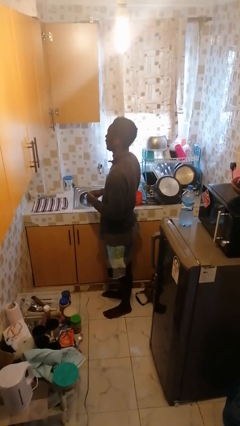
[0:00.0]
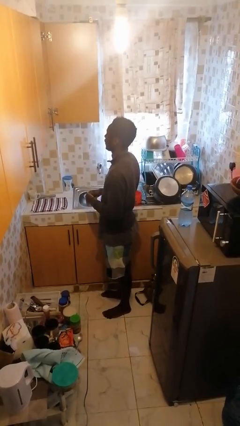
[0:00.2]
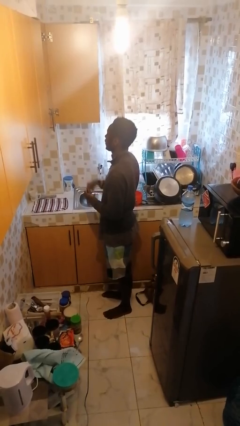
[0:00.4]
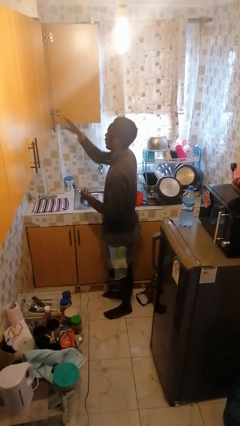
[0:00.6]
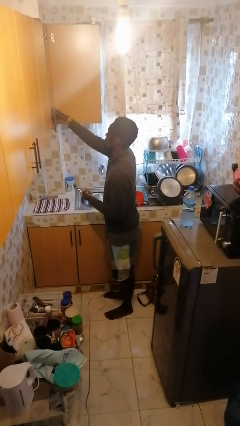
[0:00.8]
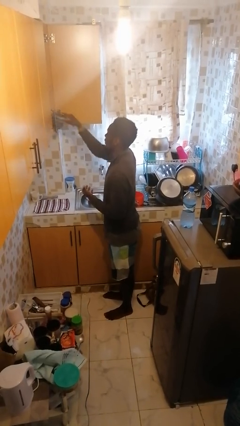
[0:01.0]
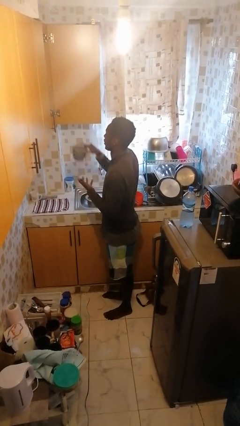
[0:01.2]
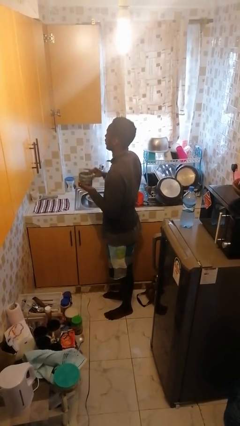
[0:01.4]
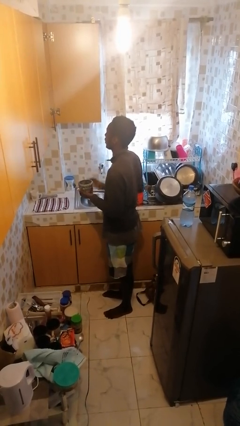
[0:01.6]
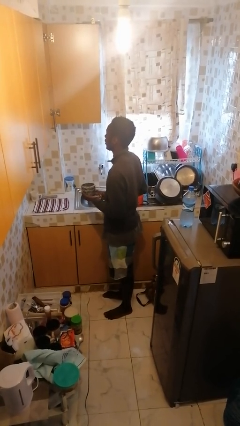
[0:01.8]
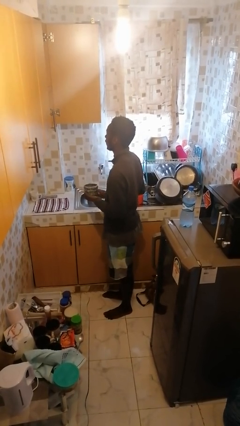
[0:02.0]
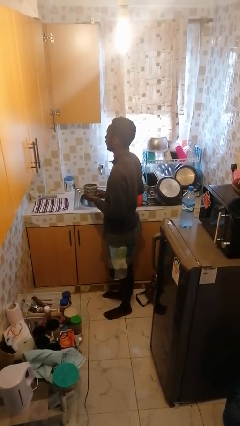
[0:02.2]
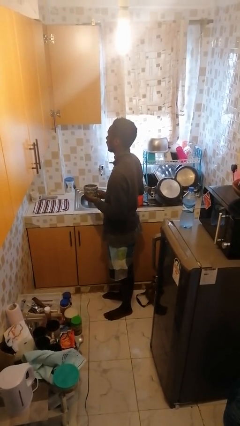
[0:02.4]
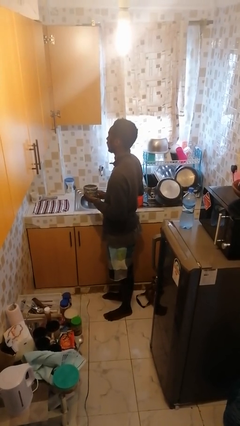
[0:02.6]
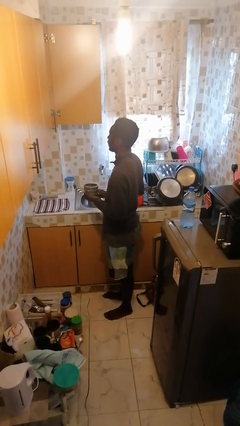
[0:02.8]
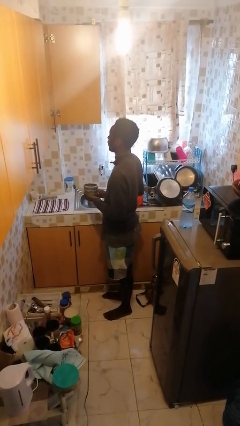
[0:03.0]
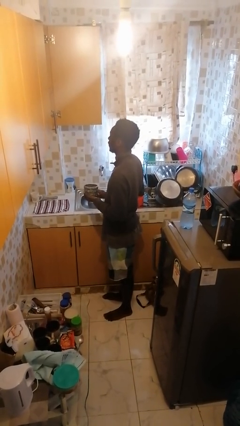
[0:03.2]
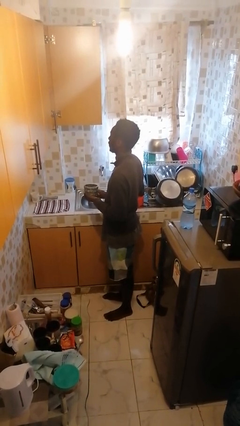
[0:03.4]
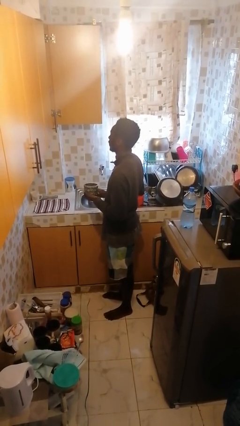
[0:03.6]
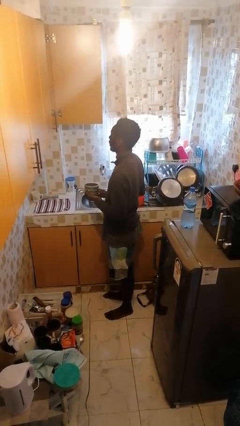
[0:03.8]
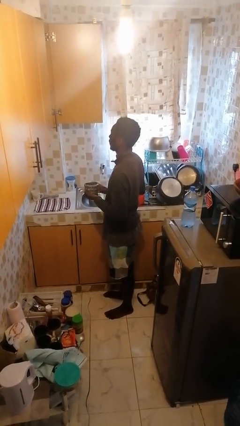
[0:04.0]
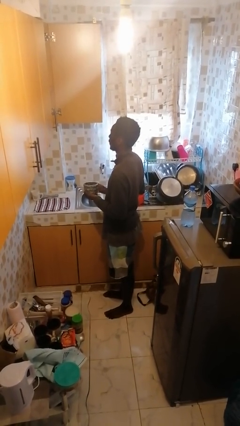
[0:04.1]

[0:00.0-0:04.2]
person picks up object from cabinet

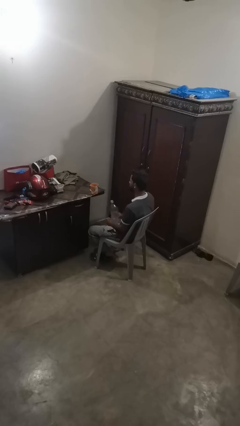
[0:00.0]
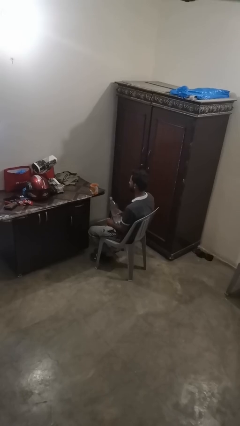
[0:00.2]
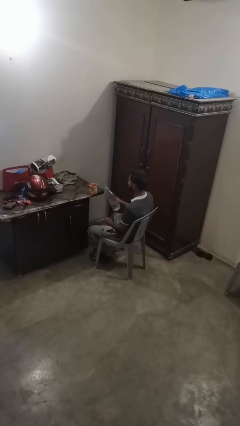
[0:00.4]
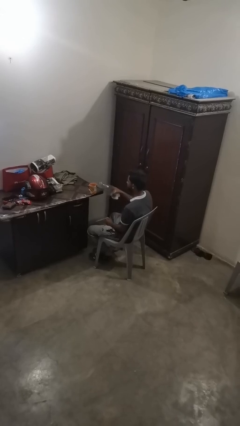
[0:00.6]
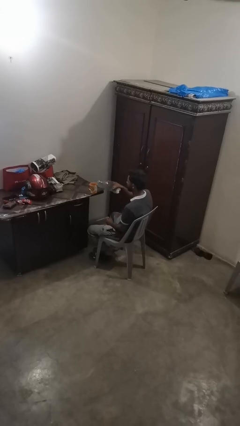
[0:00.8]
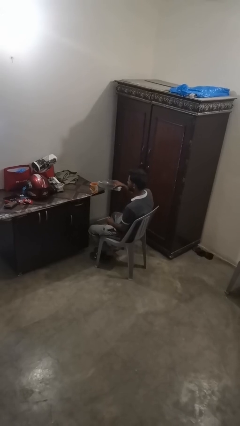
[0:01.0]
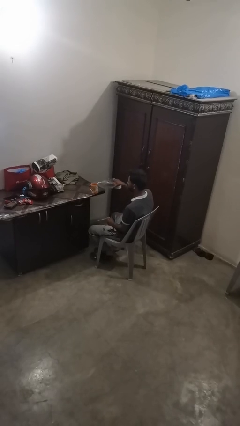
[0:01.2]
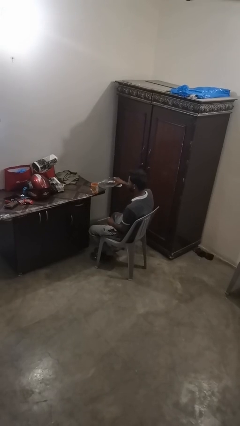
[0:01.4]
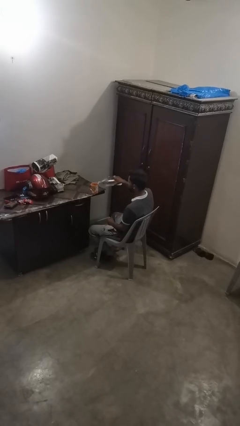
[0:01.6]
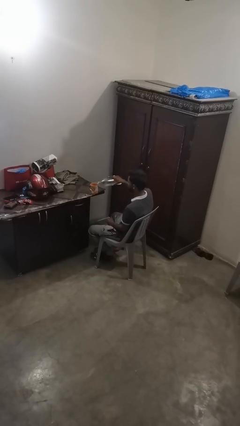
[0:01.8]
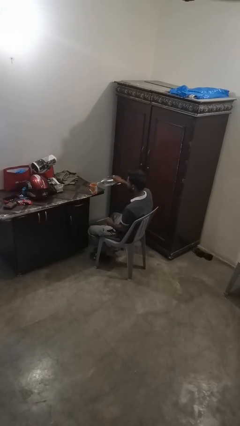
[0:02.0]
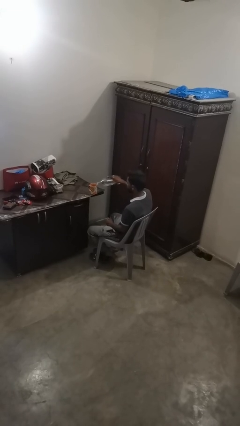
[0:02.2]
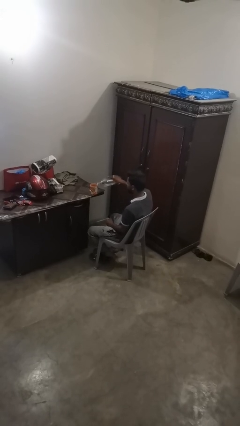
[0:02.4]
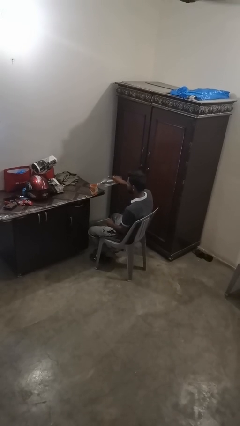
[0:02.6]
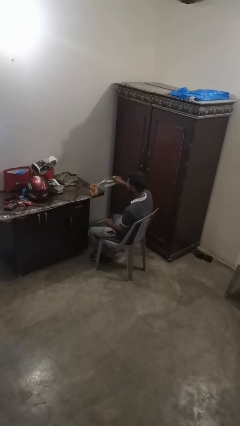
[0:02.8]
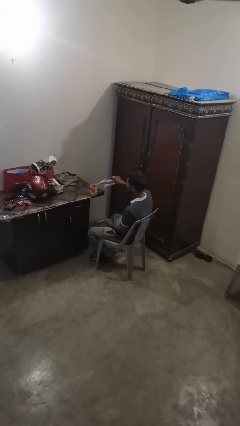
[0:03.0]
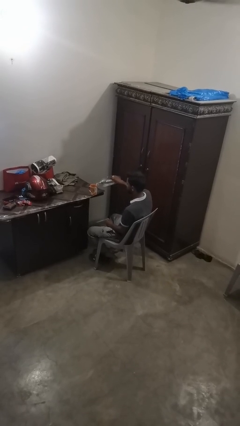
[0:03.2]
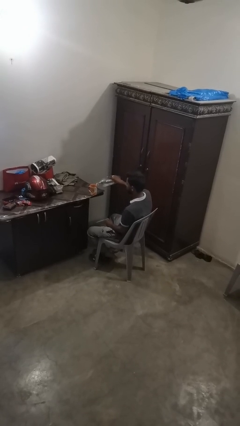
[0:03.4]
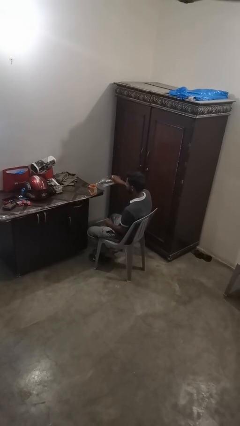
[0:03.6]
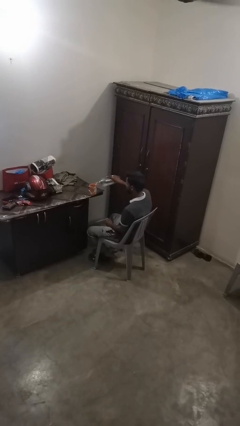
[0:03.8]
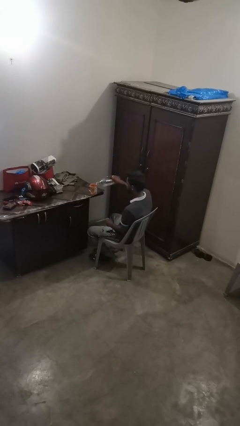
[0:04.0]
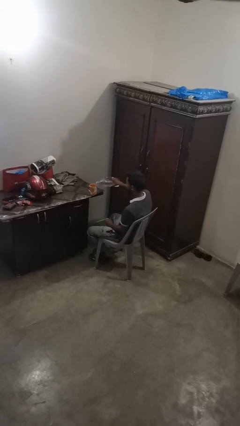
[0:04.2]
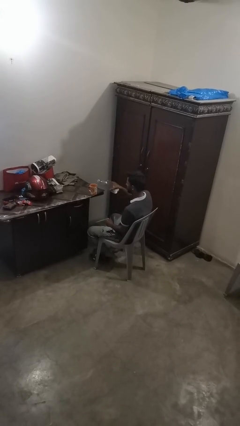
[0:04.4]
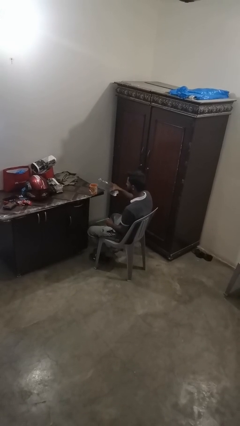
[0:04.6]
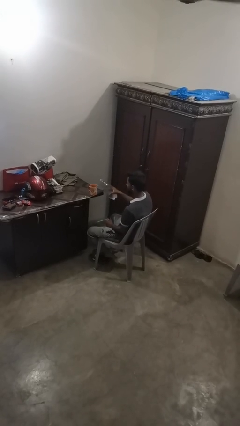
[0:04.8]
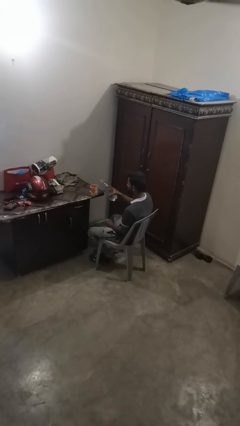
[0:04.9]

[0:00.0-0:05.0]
person pours liquid into cup

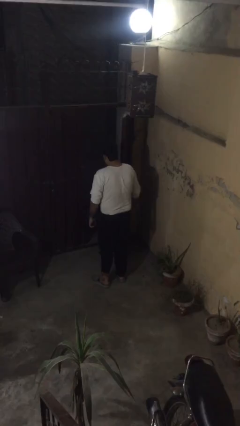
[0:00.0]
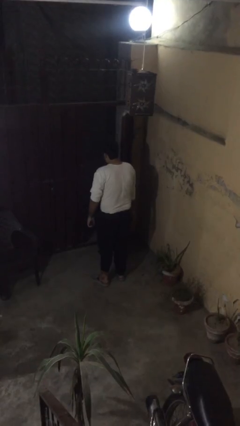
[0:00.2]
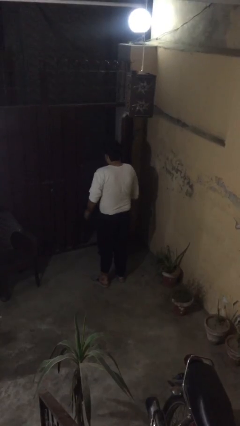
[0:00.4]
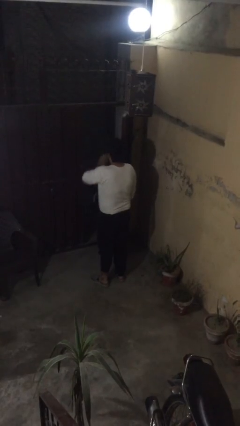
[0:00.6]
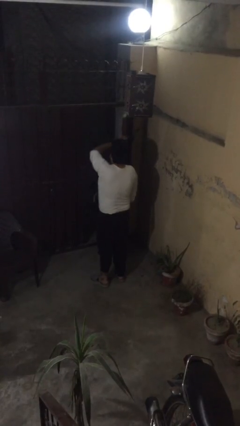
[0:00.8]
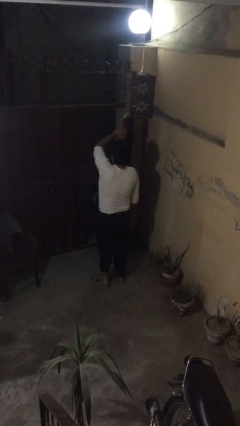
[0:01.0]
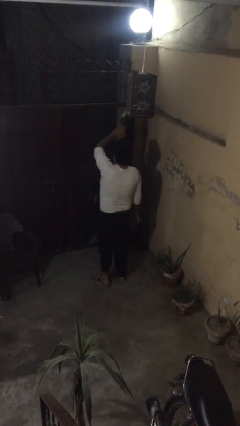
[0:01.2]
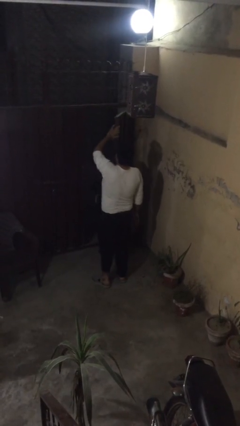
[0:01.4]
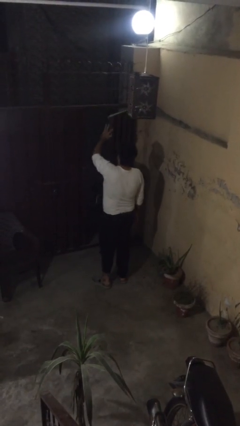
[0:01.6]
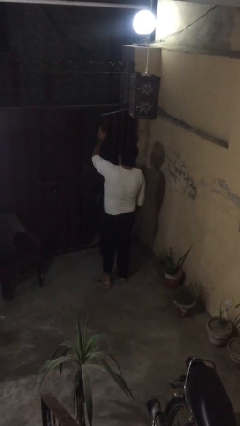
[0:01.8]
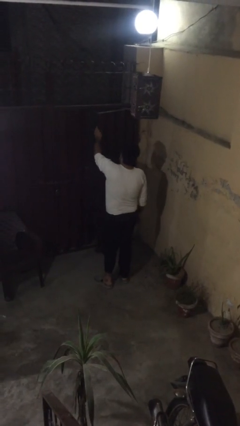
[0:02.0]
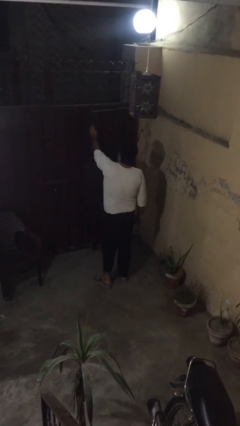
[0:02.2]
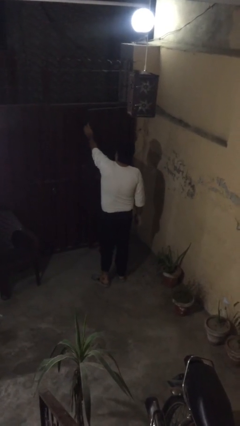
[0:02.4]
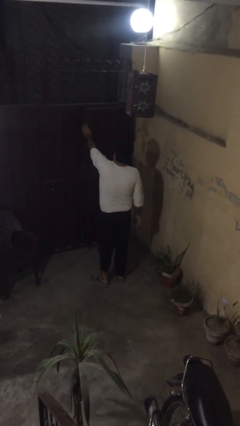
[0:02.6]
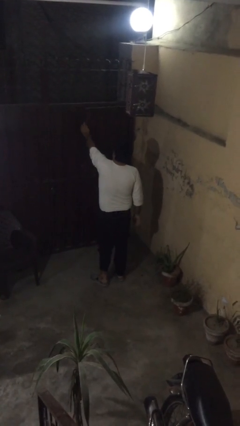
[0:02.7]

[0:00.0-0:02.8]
person closes facility door

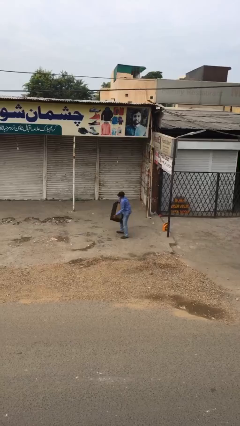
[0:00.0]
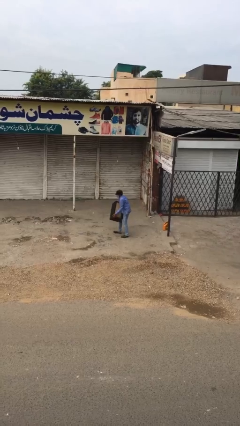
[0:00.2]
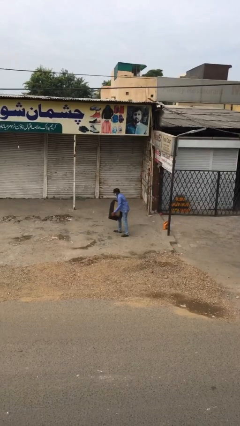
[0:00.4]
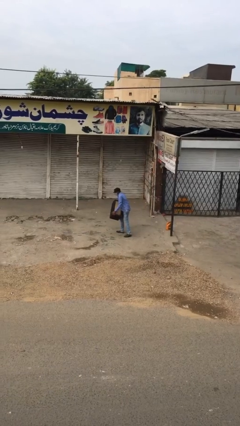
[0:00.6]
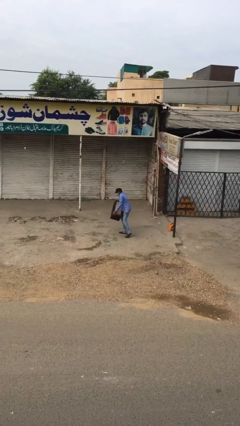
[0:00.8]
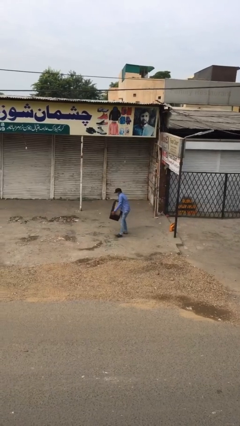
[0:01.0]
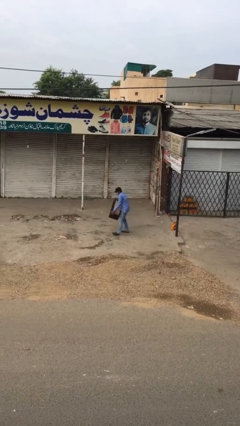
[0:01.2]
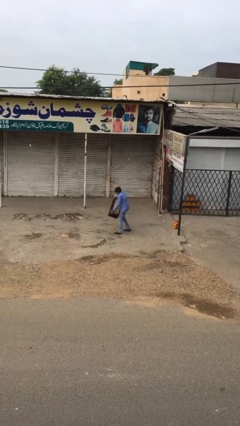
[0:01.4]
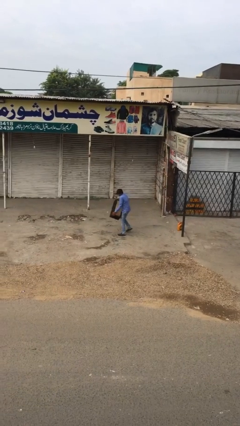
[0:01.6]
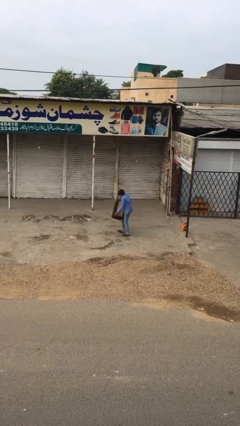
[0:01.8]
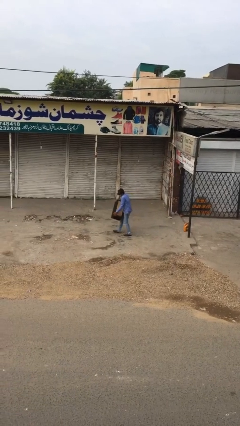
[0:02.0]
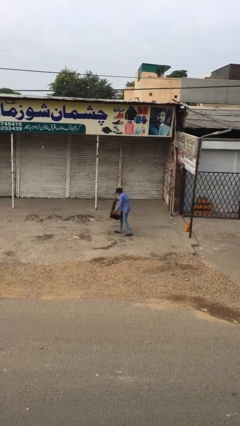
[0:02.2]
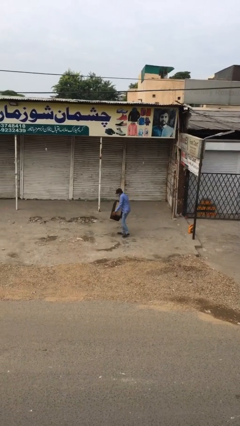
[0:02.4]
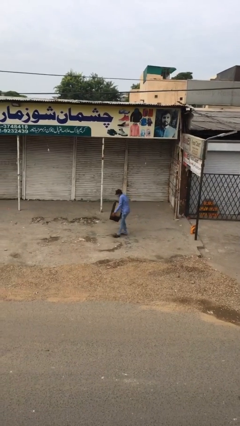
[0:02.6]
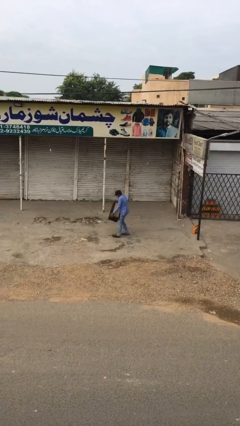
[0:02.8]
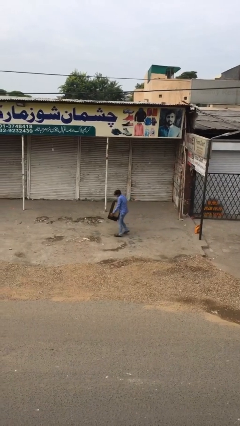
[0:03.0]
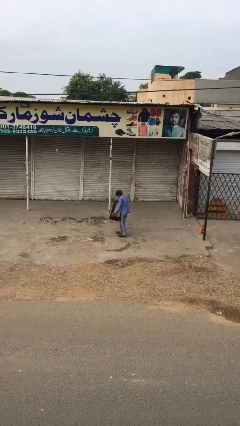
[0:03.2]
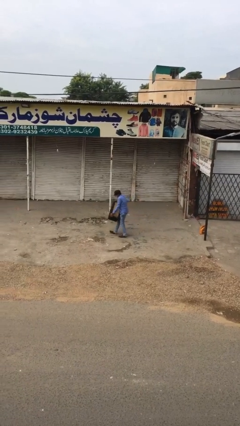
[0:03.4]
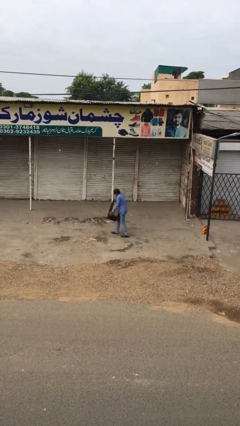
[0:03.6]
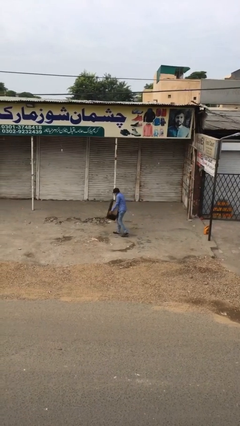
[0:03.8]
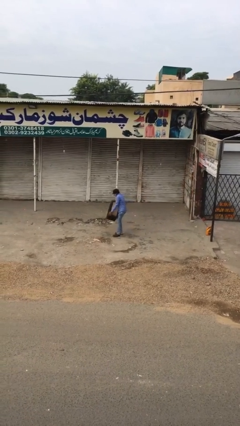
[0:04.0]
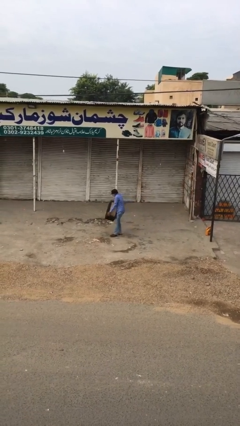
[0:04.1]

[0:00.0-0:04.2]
person carries heavy object

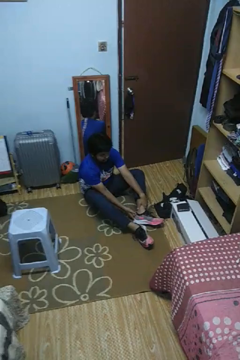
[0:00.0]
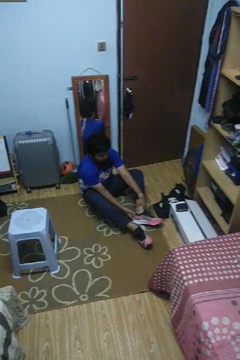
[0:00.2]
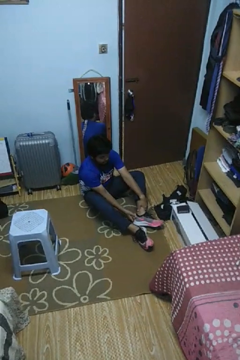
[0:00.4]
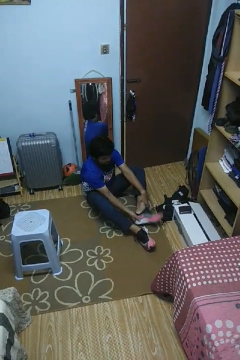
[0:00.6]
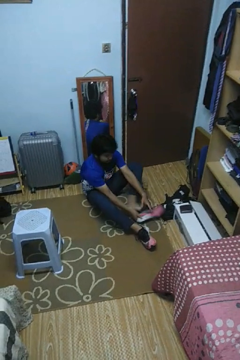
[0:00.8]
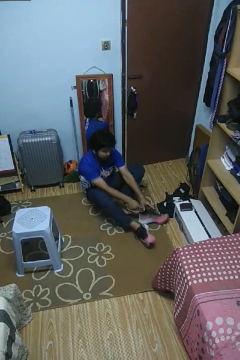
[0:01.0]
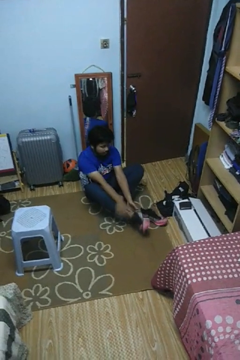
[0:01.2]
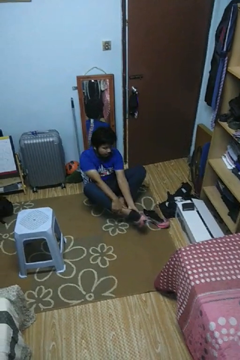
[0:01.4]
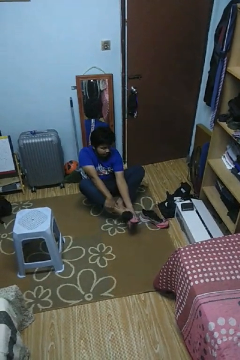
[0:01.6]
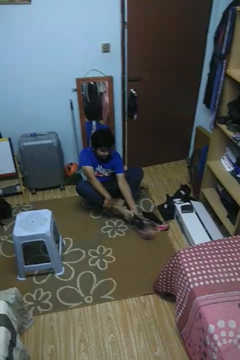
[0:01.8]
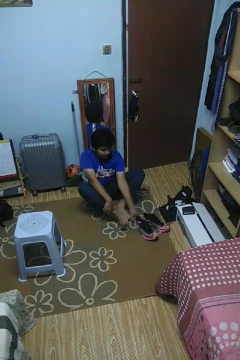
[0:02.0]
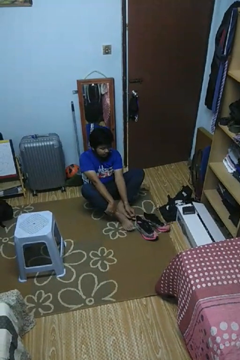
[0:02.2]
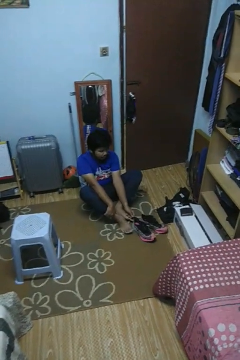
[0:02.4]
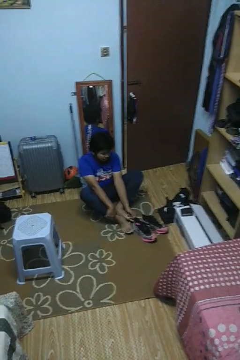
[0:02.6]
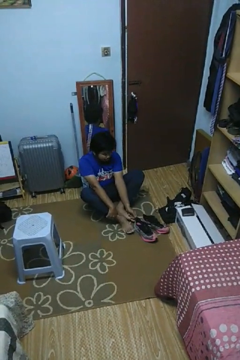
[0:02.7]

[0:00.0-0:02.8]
person takes off shoes
